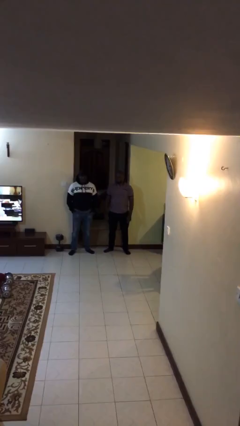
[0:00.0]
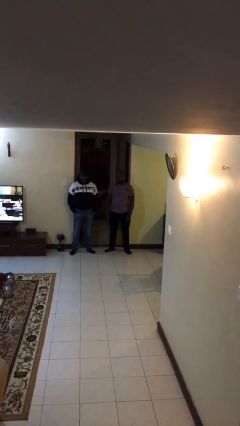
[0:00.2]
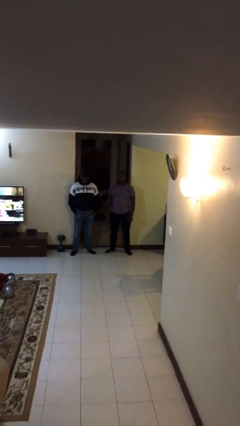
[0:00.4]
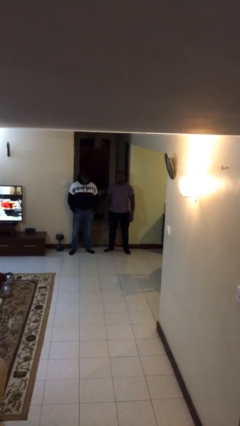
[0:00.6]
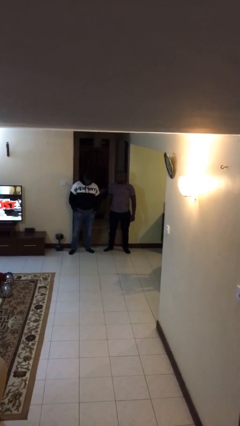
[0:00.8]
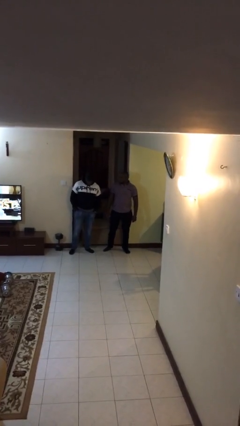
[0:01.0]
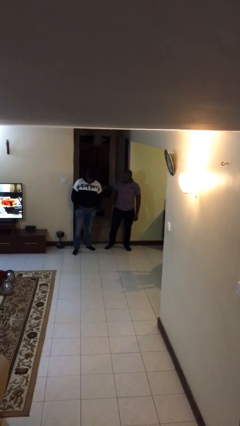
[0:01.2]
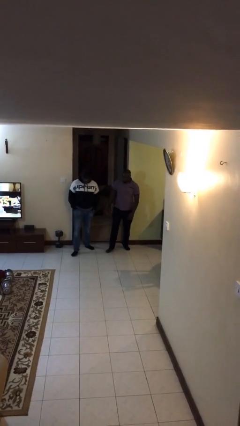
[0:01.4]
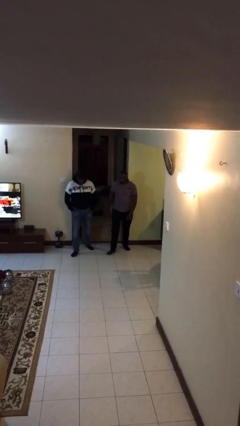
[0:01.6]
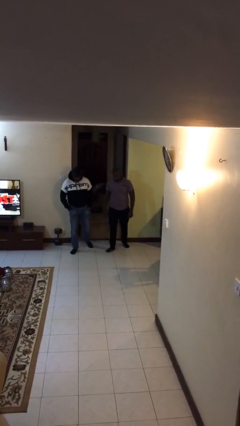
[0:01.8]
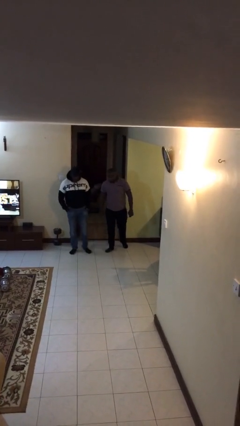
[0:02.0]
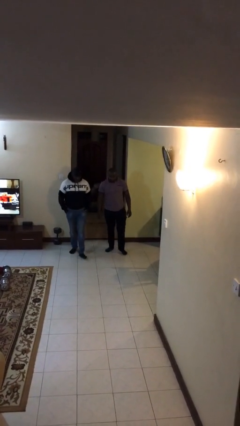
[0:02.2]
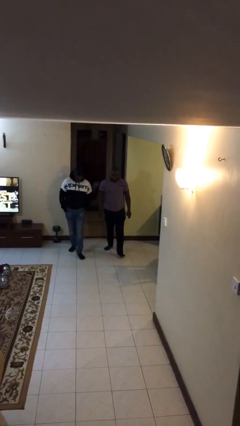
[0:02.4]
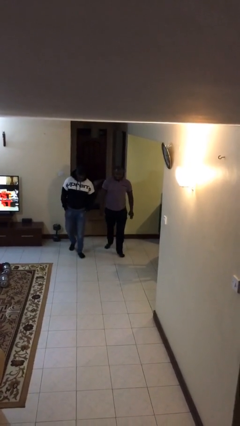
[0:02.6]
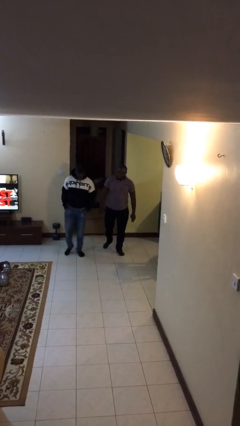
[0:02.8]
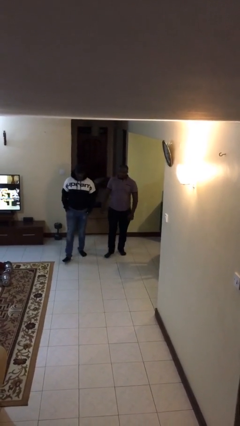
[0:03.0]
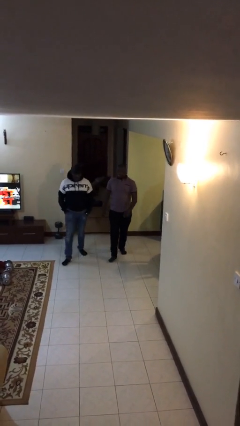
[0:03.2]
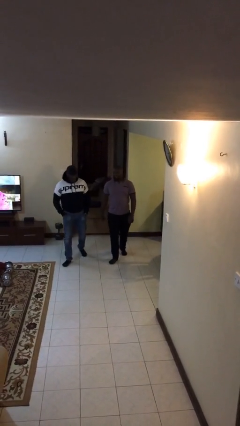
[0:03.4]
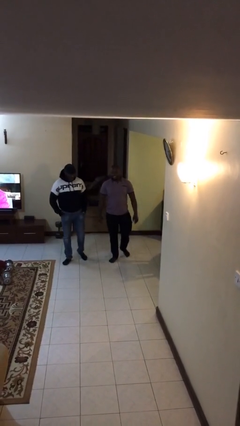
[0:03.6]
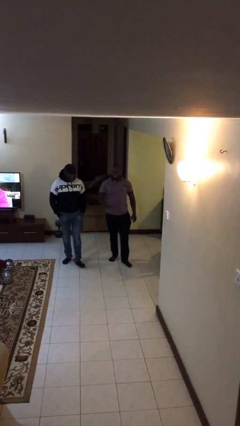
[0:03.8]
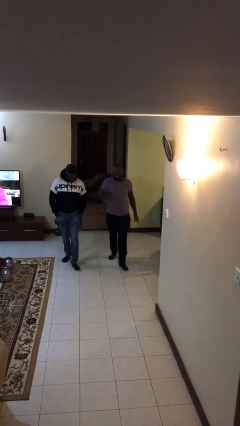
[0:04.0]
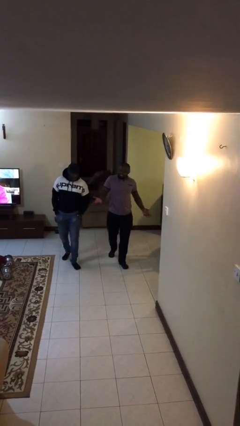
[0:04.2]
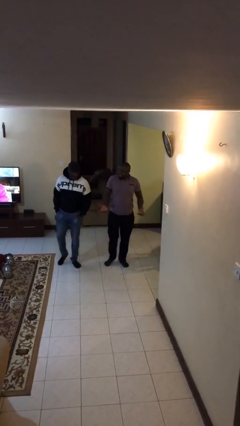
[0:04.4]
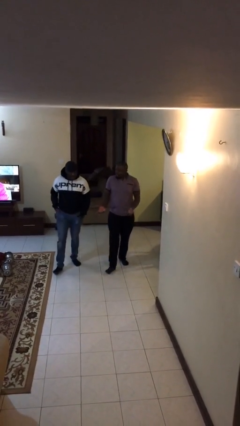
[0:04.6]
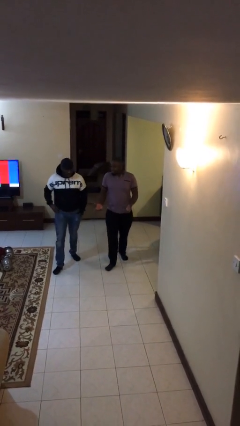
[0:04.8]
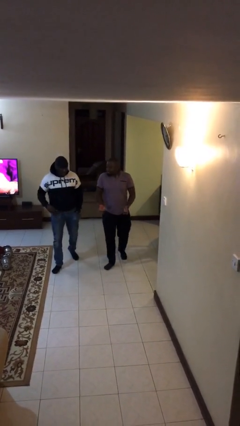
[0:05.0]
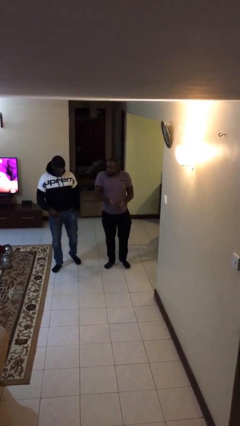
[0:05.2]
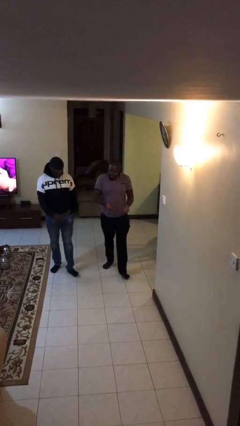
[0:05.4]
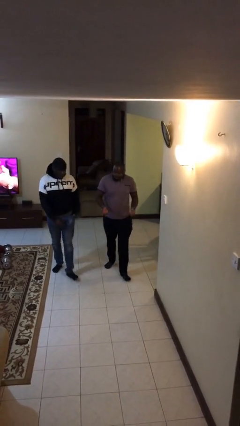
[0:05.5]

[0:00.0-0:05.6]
person talks to person

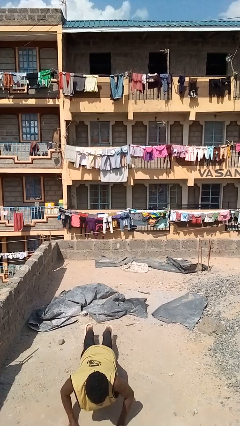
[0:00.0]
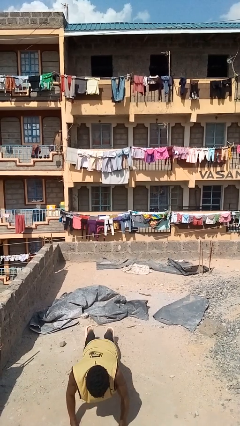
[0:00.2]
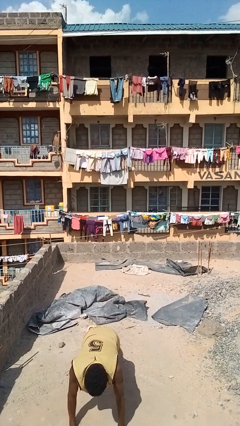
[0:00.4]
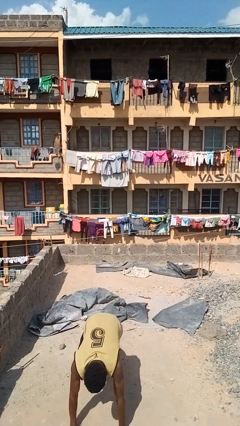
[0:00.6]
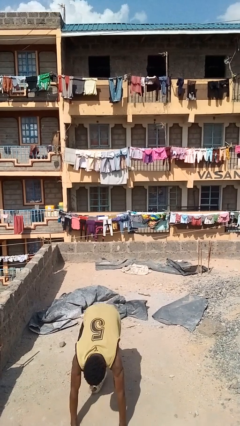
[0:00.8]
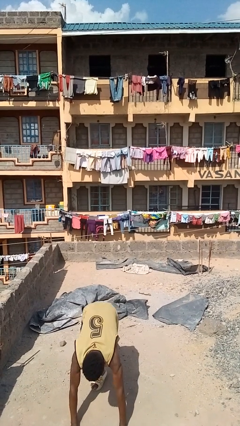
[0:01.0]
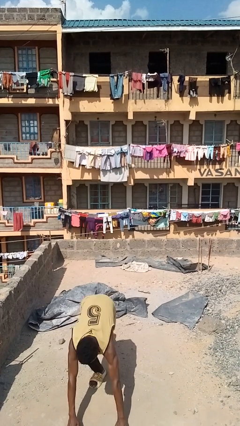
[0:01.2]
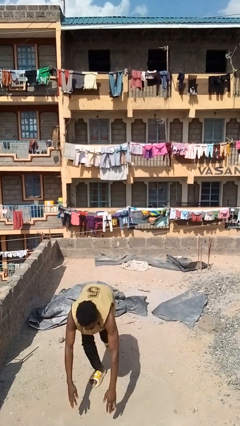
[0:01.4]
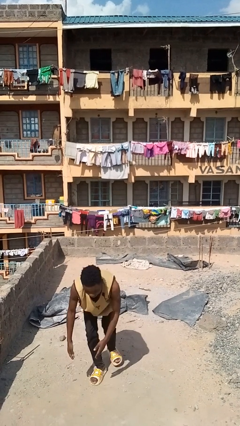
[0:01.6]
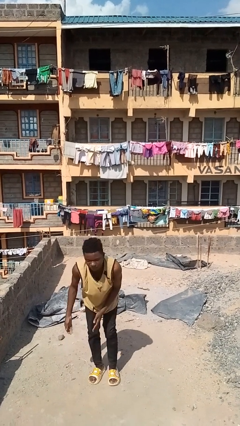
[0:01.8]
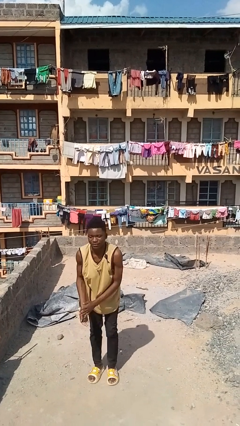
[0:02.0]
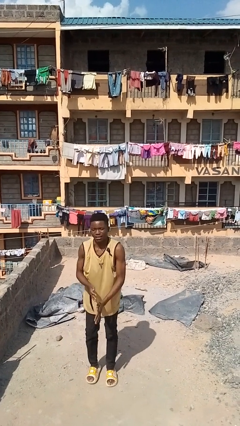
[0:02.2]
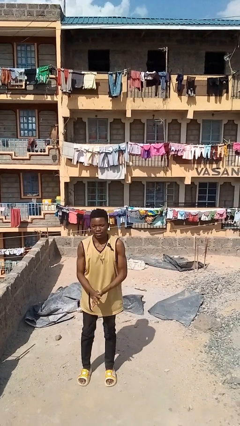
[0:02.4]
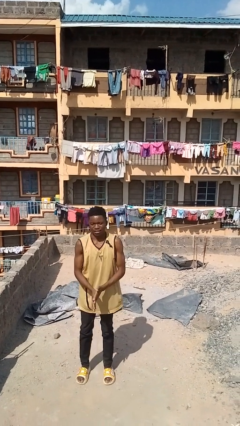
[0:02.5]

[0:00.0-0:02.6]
person stands up from floor

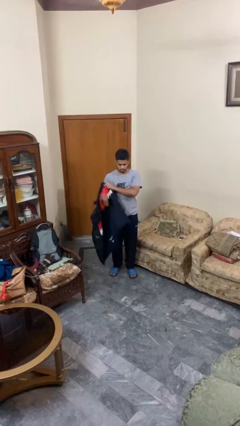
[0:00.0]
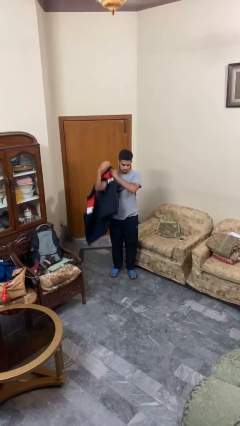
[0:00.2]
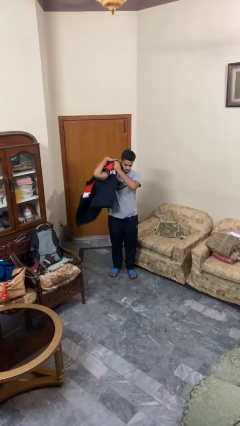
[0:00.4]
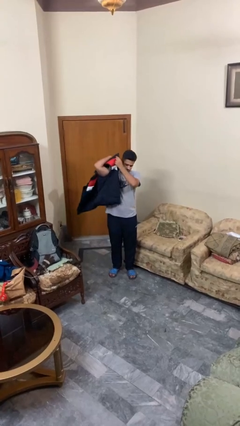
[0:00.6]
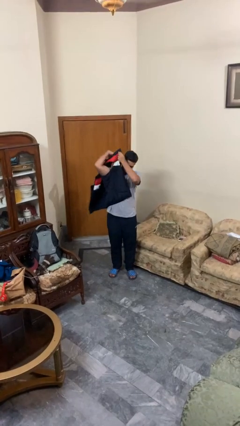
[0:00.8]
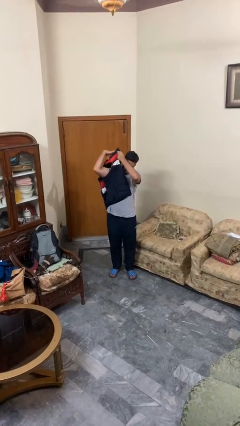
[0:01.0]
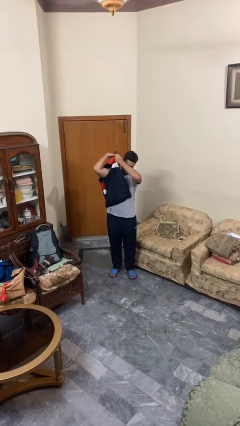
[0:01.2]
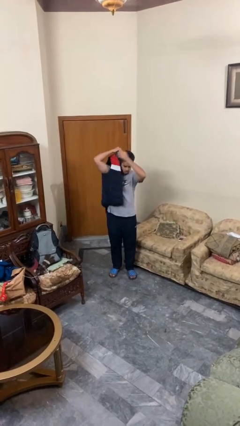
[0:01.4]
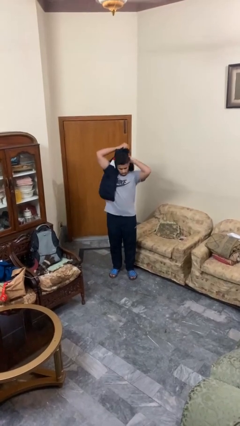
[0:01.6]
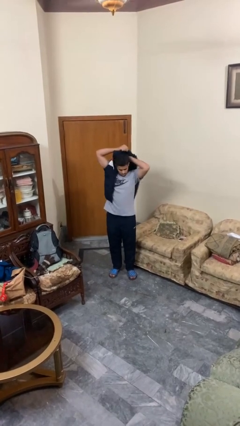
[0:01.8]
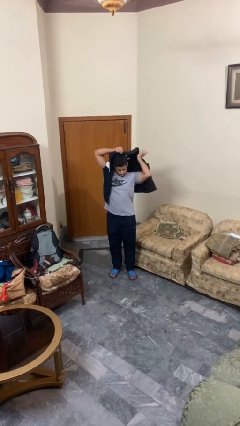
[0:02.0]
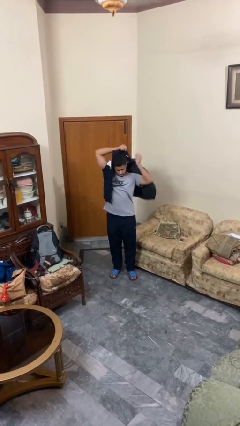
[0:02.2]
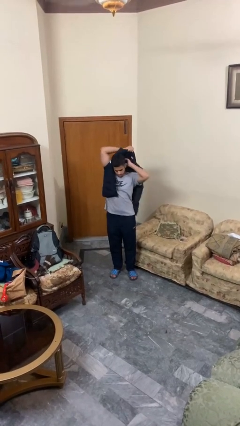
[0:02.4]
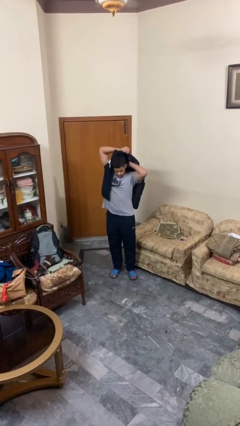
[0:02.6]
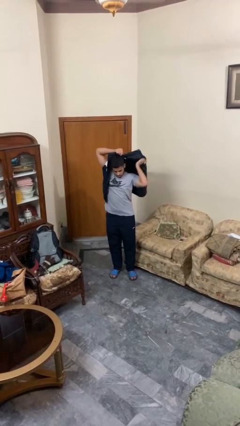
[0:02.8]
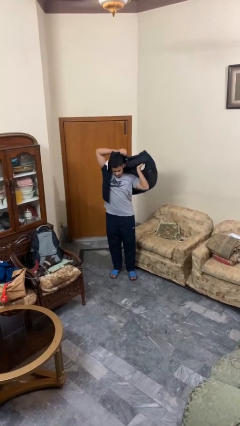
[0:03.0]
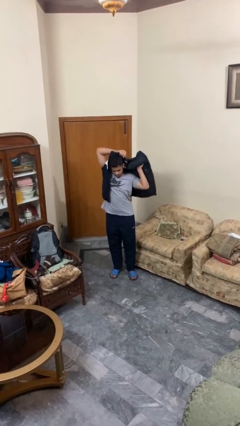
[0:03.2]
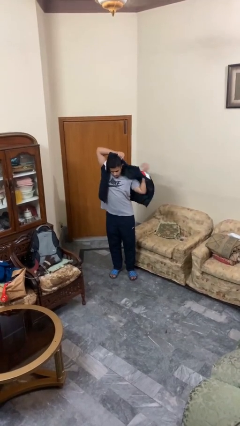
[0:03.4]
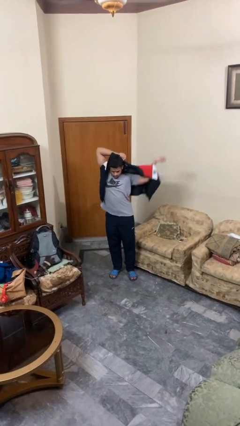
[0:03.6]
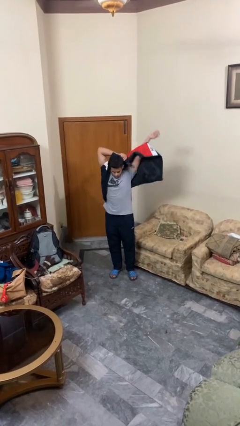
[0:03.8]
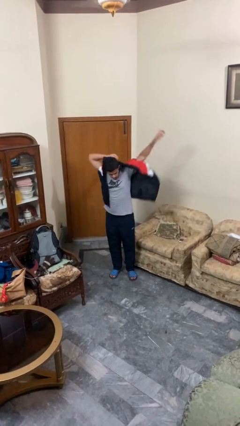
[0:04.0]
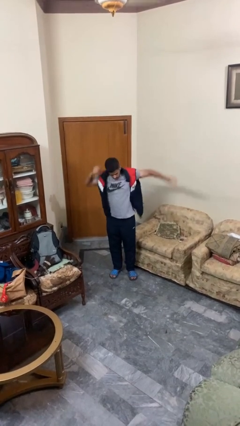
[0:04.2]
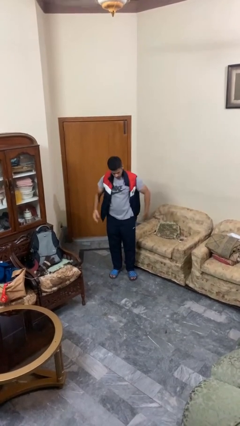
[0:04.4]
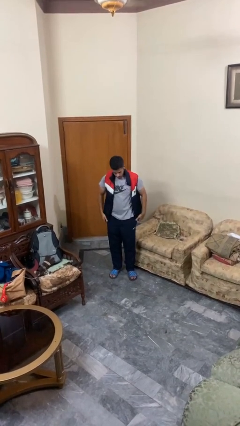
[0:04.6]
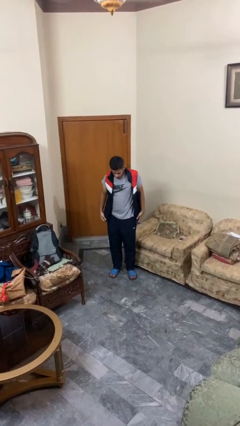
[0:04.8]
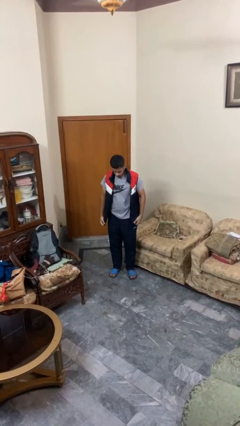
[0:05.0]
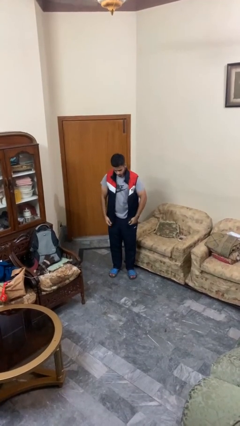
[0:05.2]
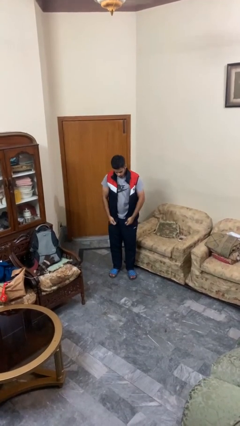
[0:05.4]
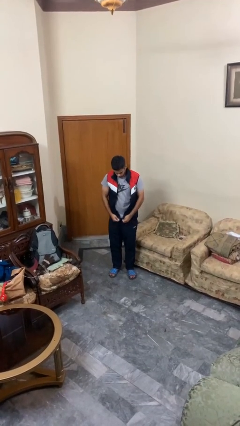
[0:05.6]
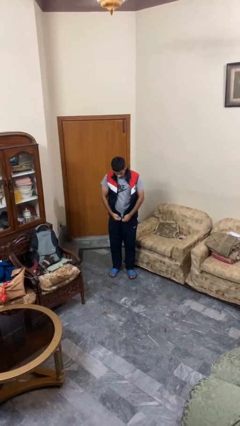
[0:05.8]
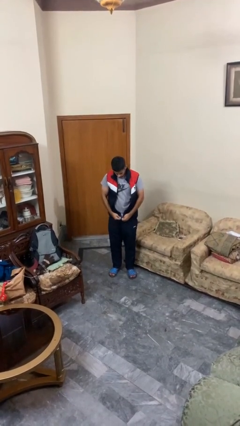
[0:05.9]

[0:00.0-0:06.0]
person puts on jacket

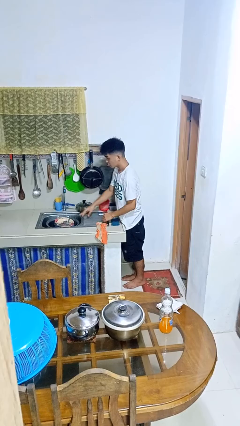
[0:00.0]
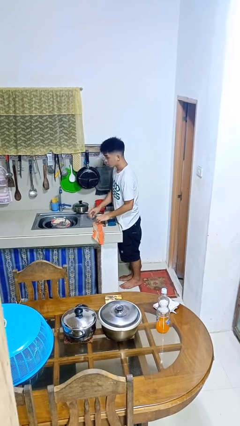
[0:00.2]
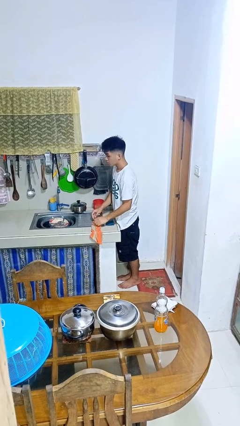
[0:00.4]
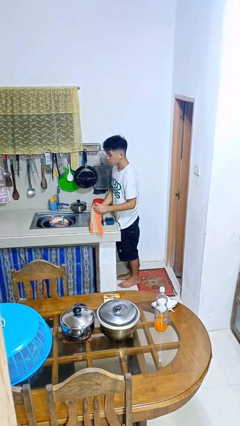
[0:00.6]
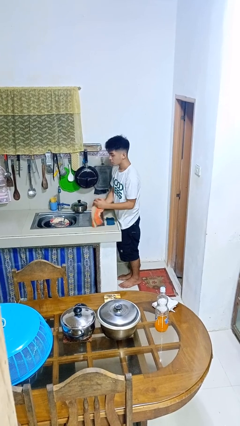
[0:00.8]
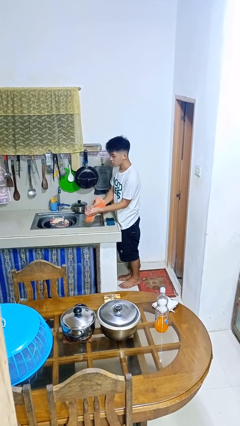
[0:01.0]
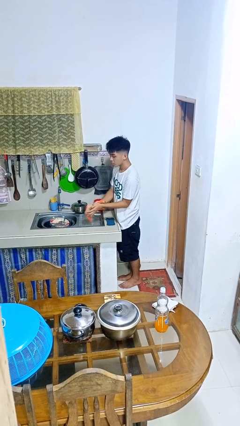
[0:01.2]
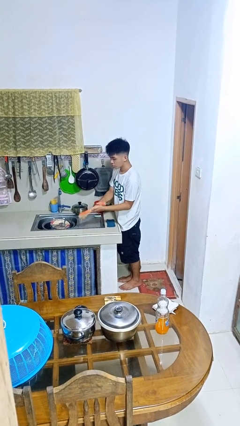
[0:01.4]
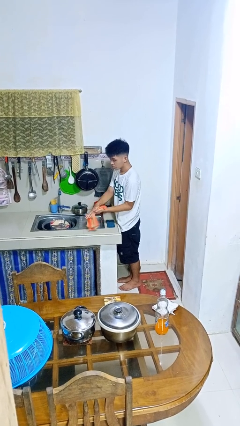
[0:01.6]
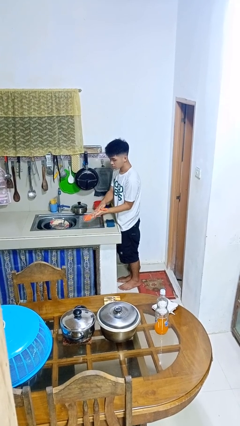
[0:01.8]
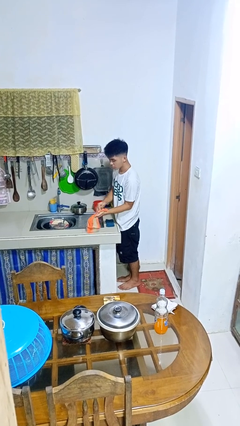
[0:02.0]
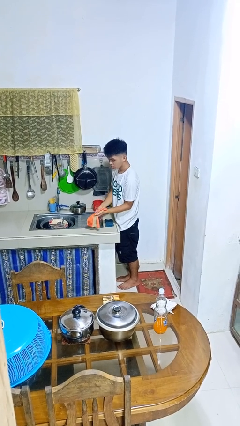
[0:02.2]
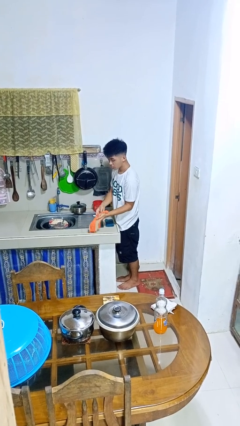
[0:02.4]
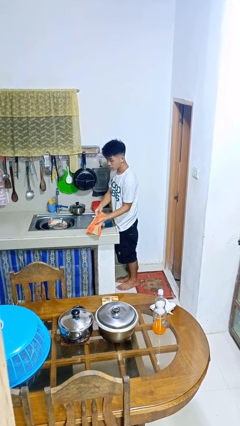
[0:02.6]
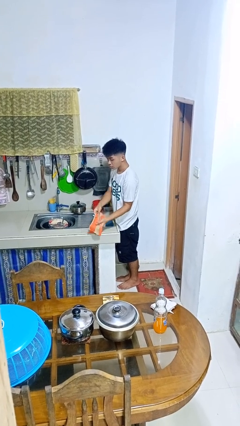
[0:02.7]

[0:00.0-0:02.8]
person dries hands with towel

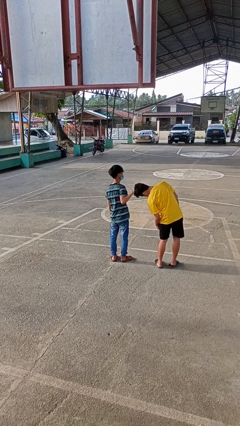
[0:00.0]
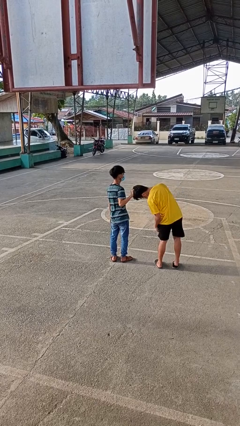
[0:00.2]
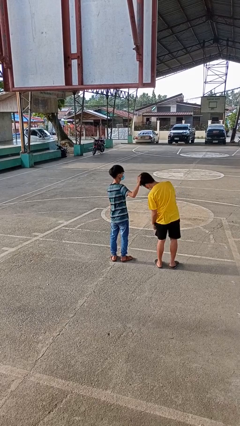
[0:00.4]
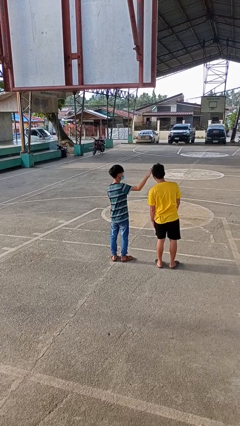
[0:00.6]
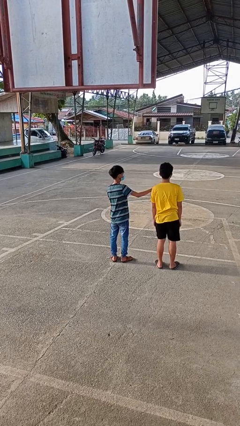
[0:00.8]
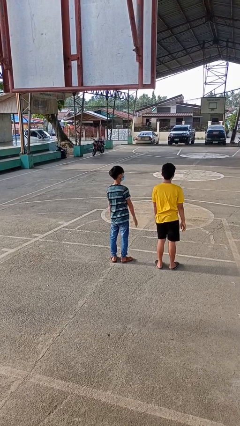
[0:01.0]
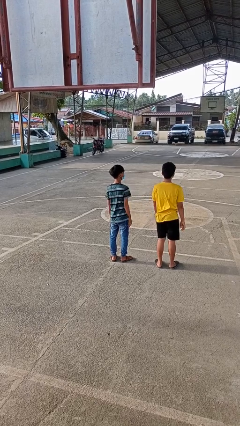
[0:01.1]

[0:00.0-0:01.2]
person grabs person by hair
